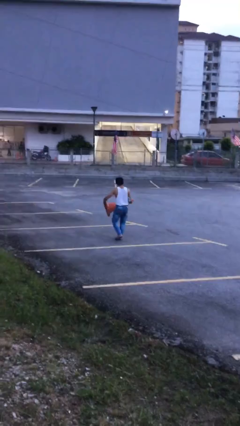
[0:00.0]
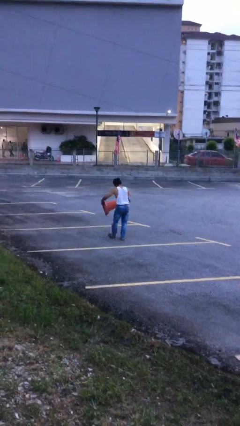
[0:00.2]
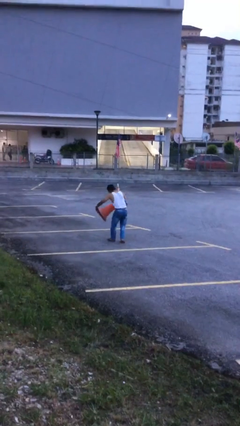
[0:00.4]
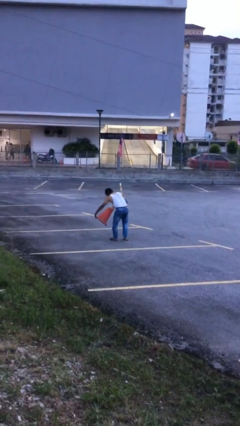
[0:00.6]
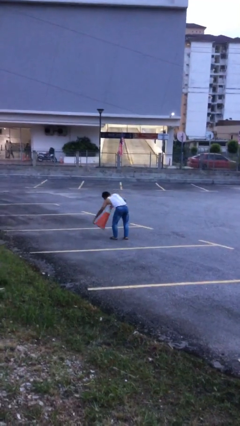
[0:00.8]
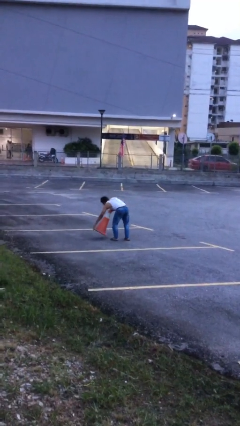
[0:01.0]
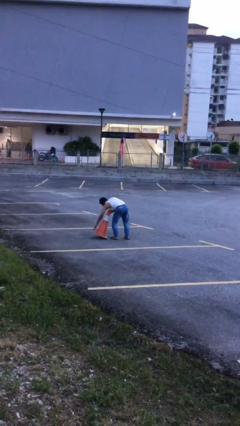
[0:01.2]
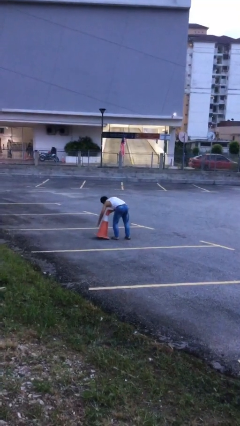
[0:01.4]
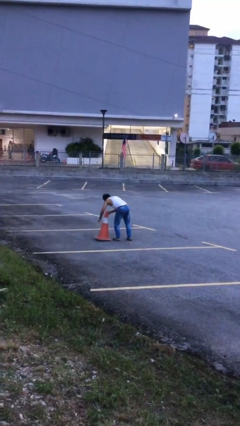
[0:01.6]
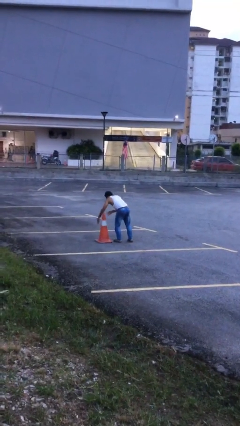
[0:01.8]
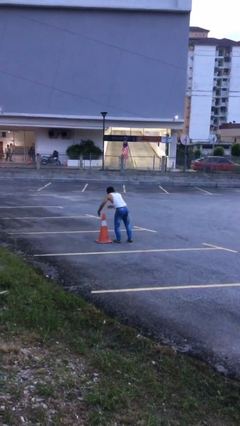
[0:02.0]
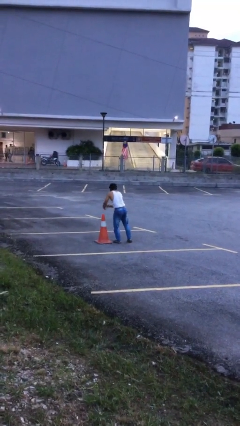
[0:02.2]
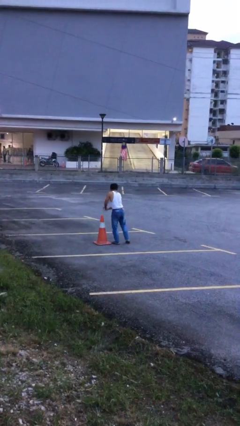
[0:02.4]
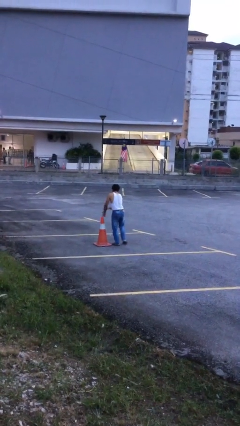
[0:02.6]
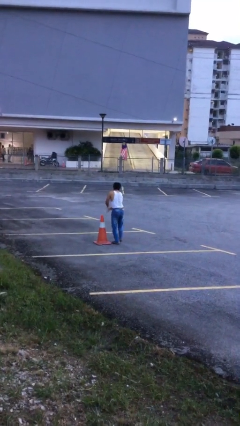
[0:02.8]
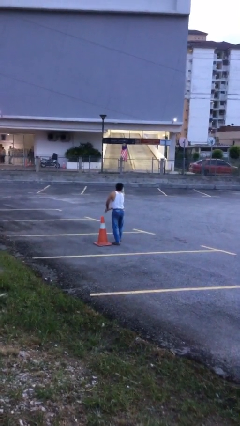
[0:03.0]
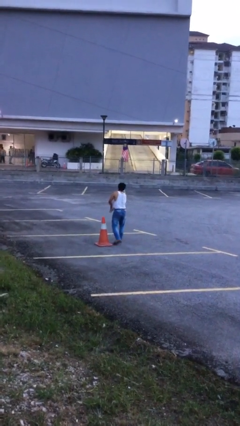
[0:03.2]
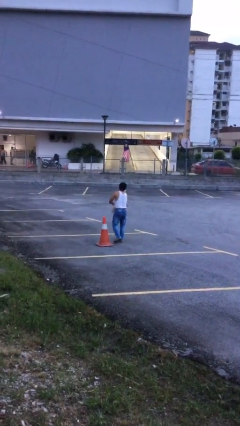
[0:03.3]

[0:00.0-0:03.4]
person puts down object on floor

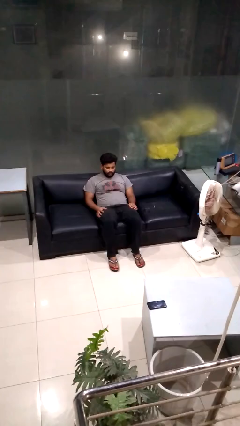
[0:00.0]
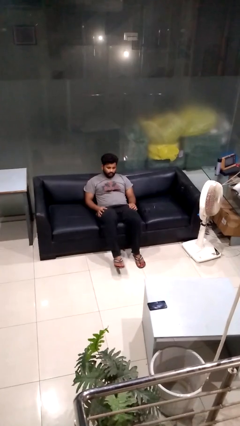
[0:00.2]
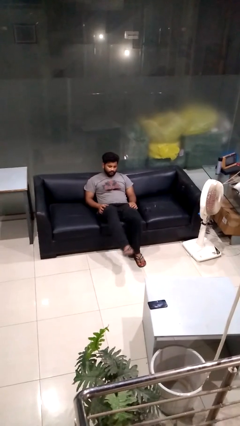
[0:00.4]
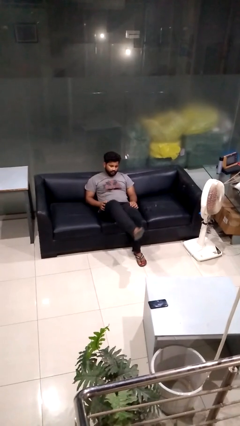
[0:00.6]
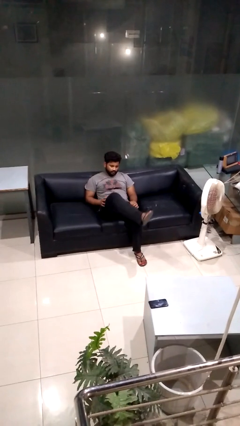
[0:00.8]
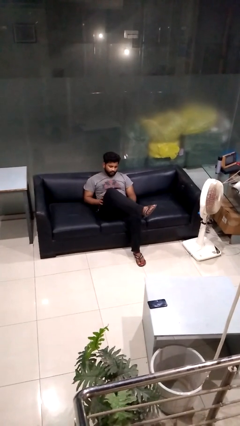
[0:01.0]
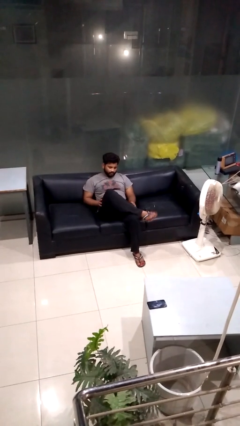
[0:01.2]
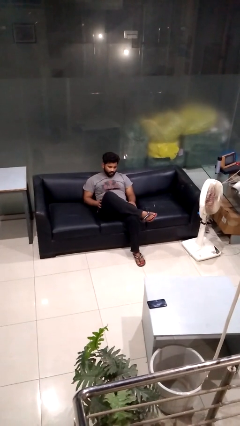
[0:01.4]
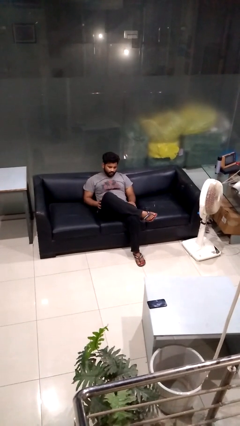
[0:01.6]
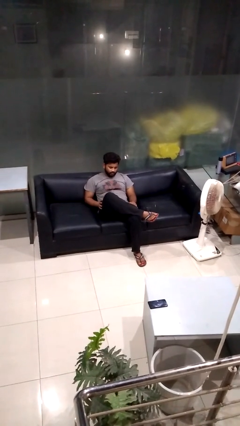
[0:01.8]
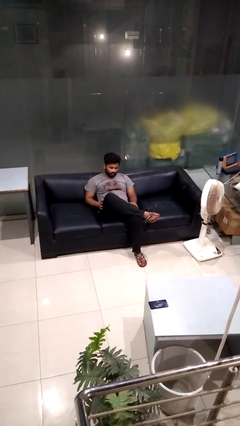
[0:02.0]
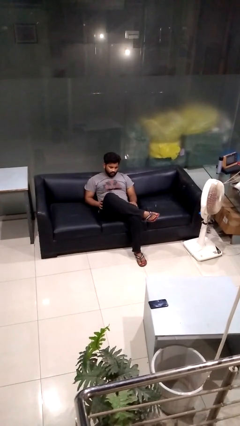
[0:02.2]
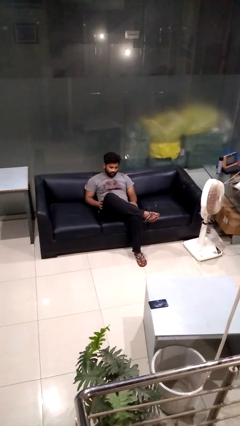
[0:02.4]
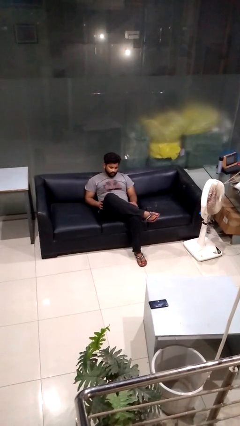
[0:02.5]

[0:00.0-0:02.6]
person crosses legs

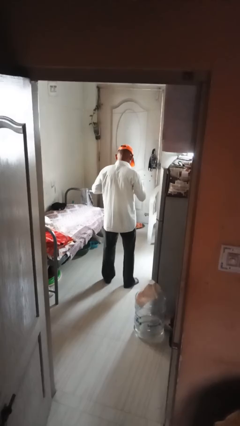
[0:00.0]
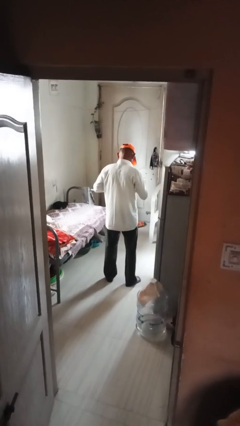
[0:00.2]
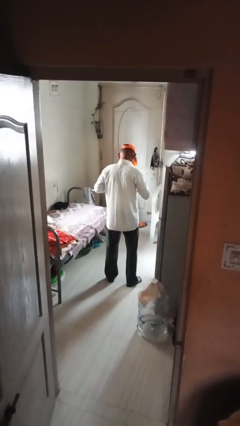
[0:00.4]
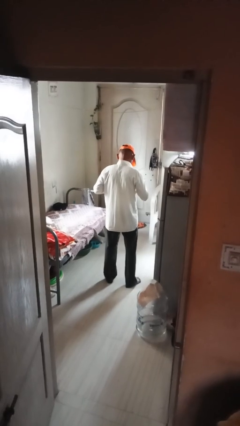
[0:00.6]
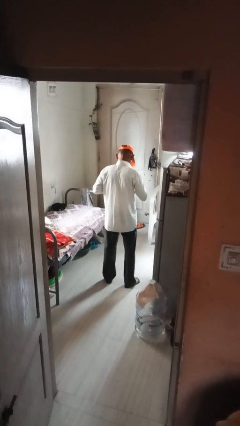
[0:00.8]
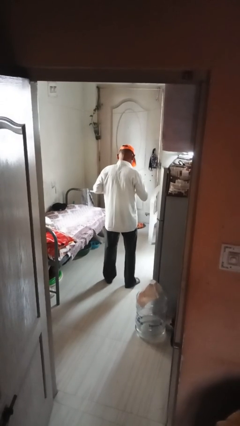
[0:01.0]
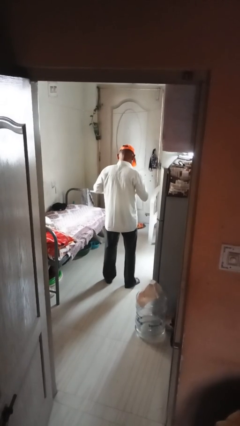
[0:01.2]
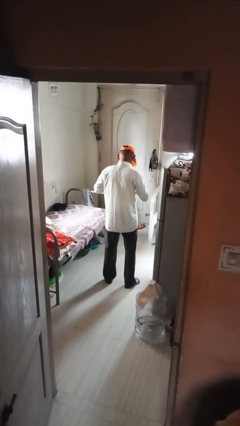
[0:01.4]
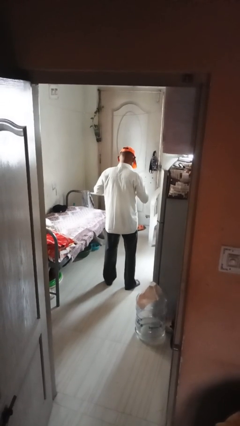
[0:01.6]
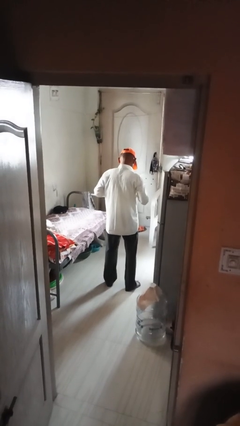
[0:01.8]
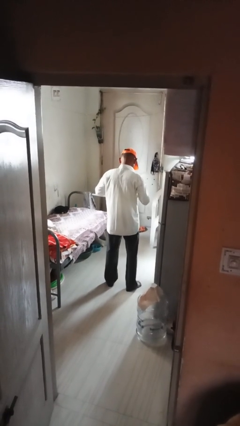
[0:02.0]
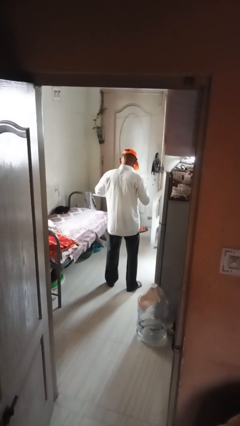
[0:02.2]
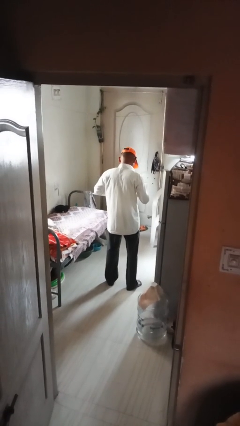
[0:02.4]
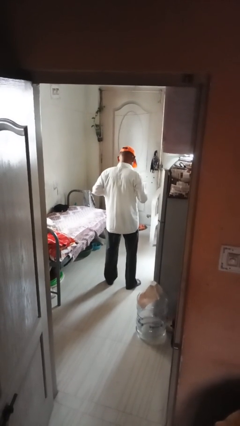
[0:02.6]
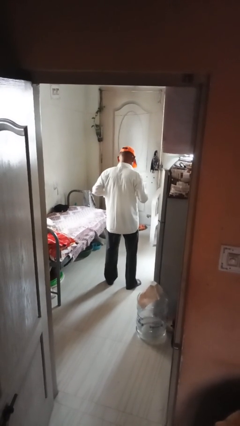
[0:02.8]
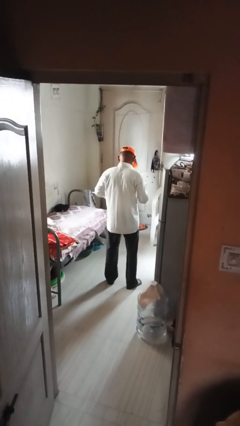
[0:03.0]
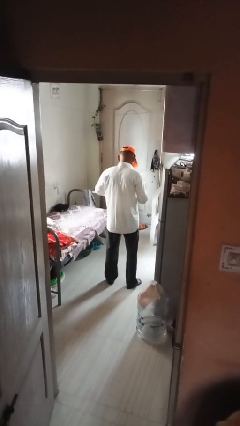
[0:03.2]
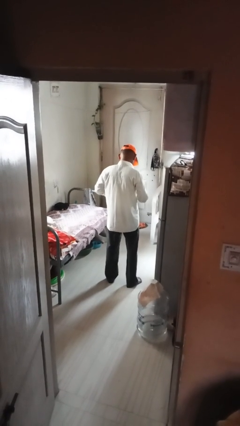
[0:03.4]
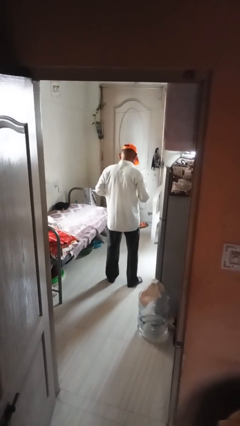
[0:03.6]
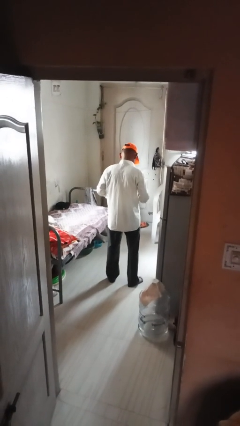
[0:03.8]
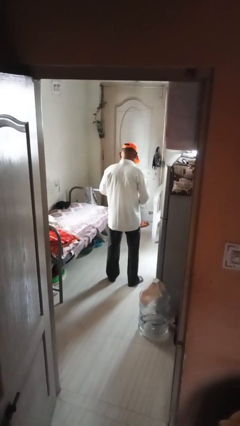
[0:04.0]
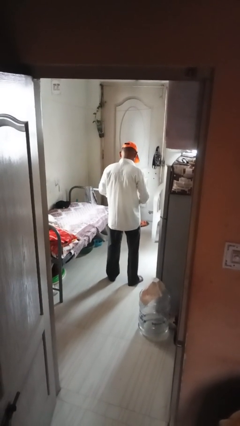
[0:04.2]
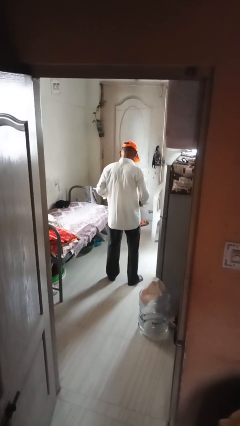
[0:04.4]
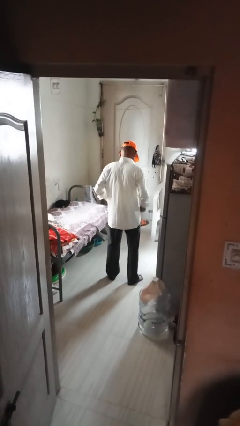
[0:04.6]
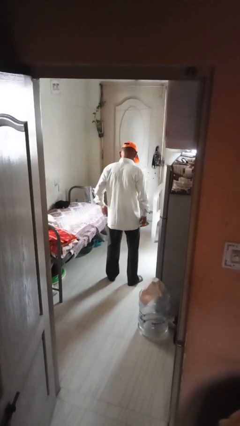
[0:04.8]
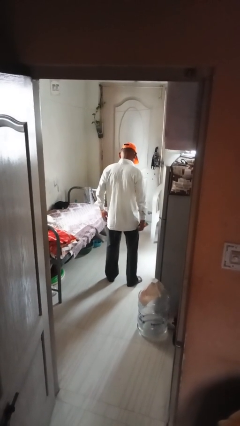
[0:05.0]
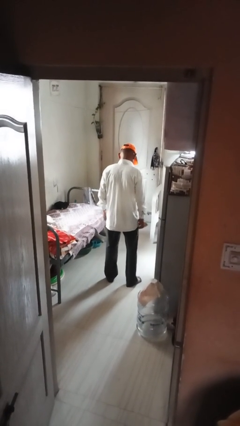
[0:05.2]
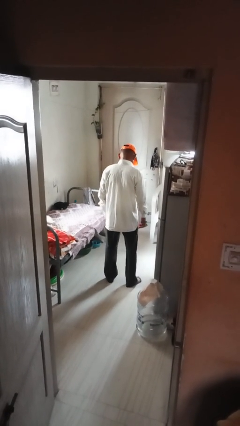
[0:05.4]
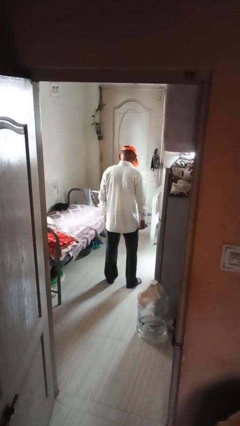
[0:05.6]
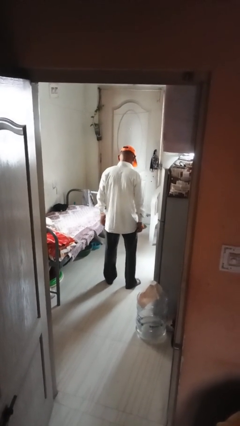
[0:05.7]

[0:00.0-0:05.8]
person unbuttons shirt

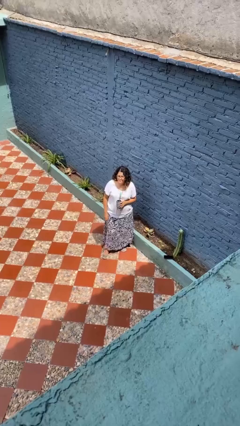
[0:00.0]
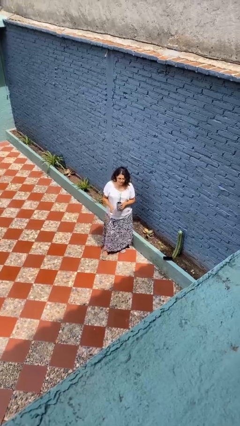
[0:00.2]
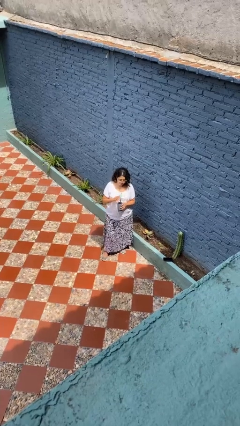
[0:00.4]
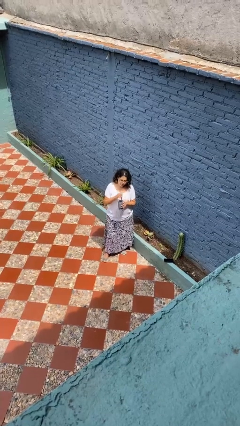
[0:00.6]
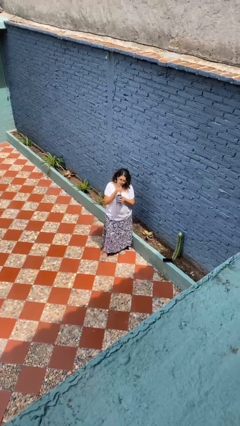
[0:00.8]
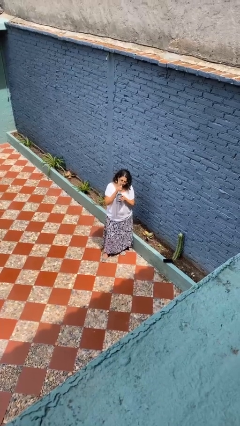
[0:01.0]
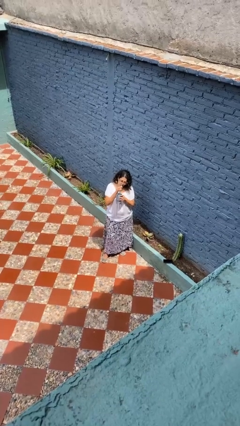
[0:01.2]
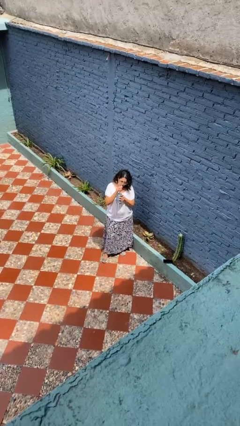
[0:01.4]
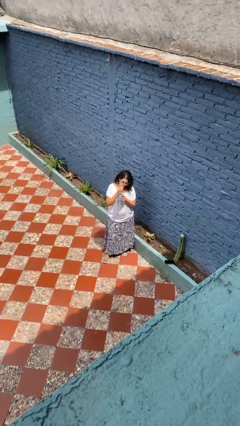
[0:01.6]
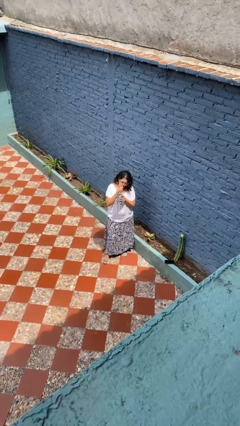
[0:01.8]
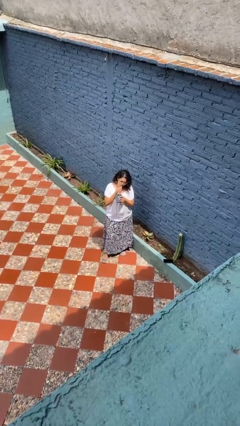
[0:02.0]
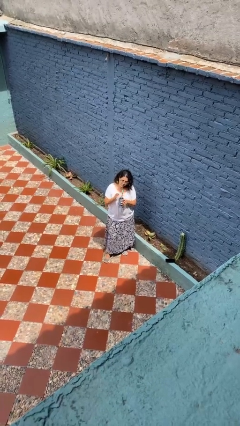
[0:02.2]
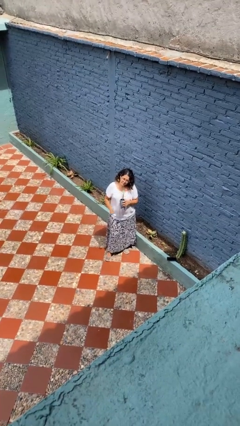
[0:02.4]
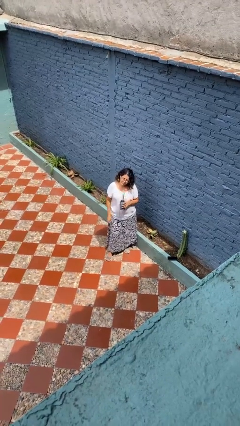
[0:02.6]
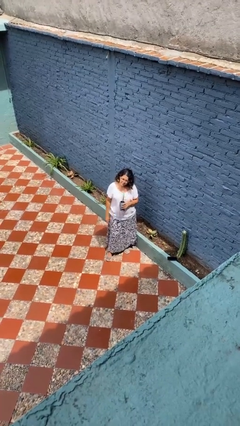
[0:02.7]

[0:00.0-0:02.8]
person drinks from straw

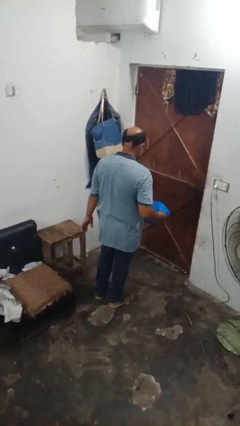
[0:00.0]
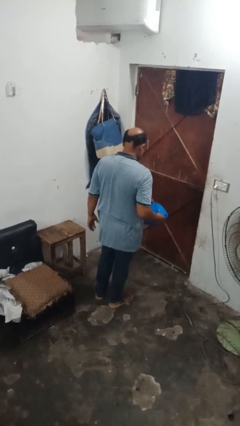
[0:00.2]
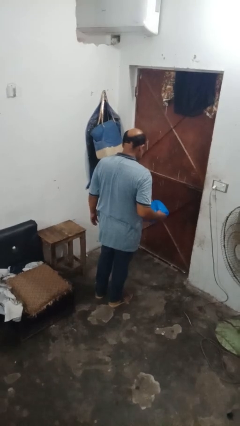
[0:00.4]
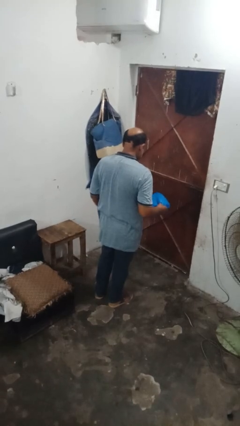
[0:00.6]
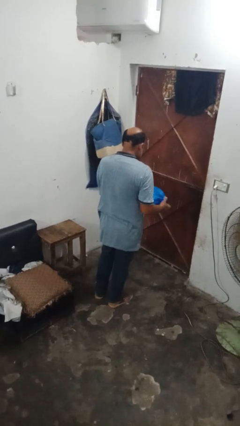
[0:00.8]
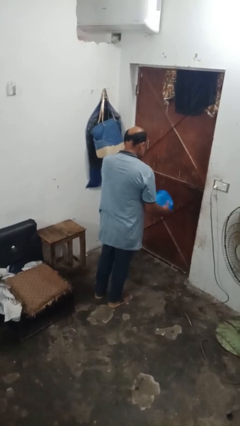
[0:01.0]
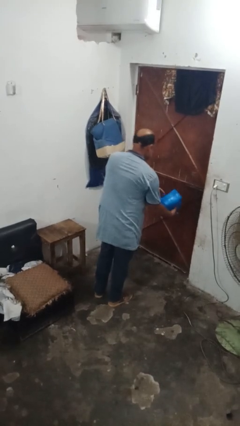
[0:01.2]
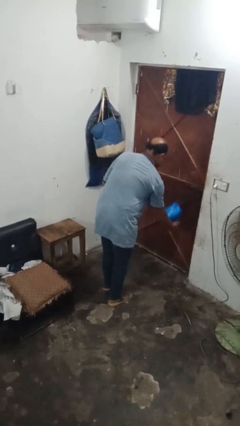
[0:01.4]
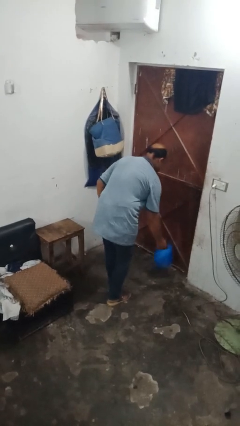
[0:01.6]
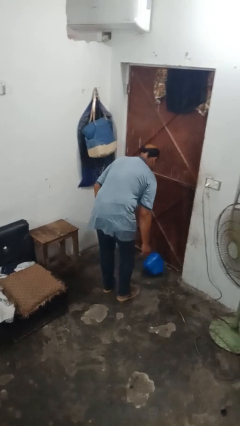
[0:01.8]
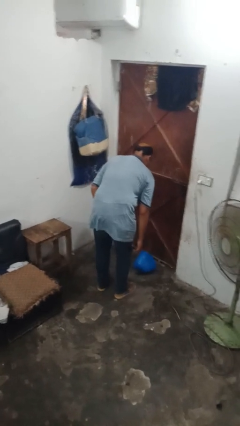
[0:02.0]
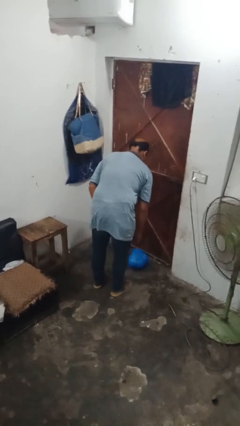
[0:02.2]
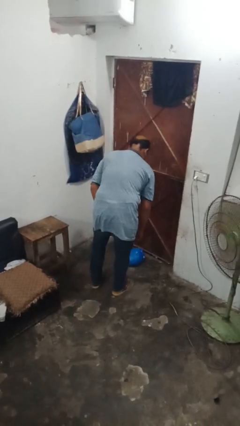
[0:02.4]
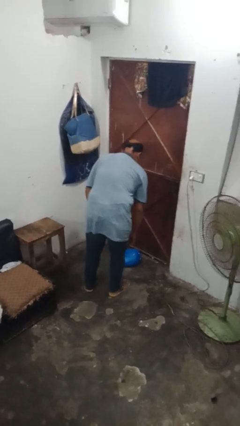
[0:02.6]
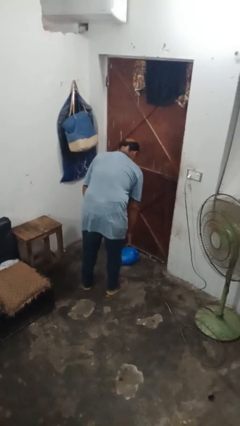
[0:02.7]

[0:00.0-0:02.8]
person drops object

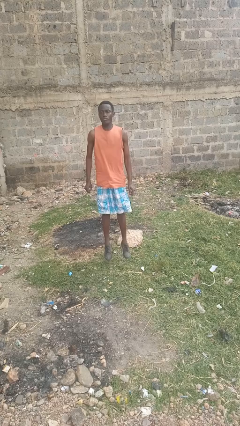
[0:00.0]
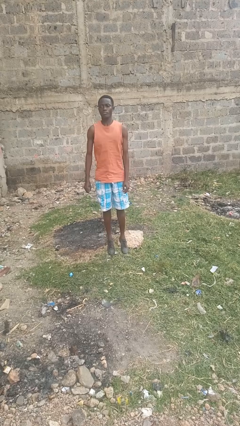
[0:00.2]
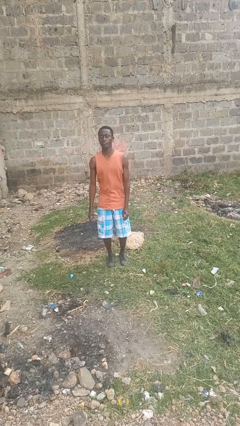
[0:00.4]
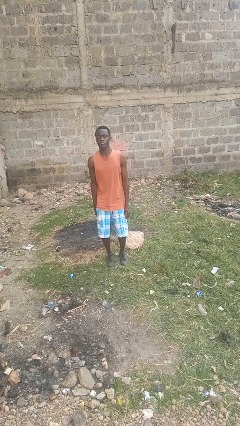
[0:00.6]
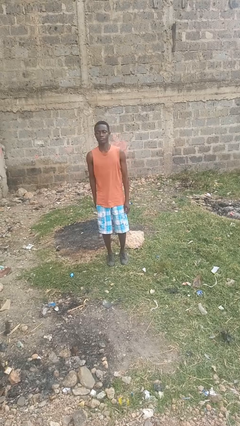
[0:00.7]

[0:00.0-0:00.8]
person jumps
